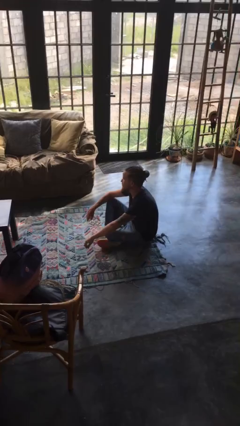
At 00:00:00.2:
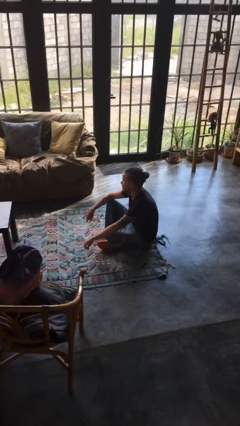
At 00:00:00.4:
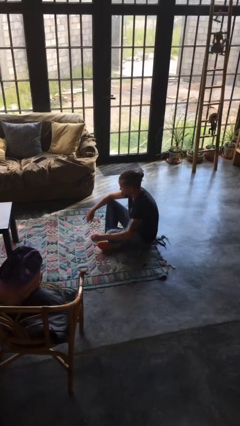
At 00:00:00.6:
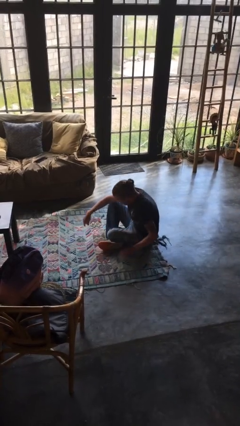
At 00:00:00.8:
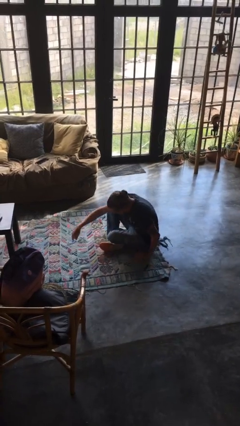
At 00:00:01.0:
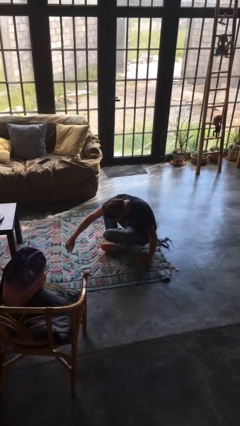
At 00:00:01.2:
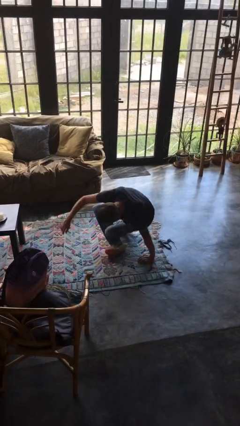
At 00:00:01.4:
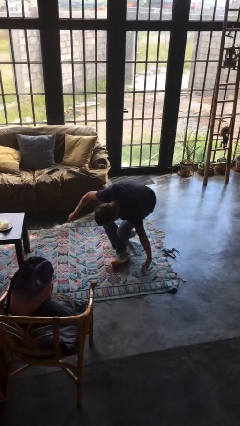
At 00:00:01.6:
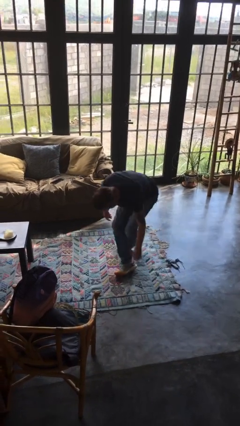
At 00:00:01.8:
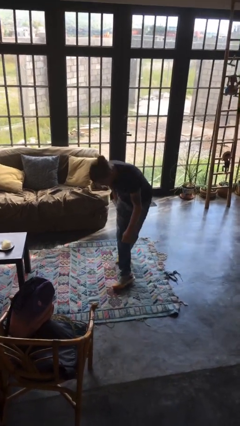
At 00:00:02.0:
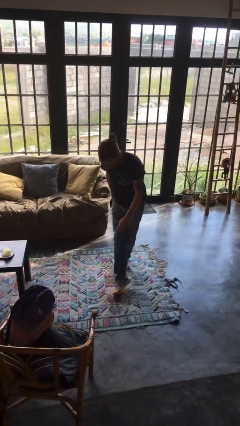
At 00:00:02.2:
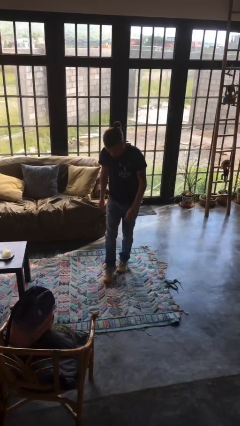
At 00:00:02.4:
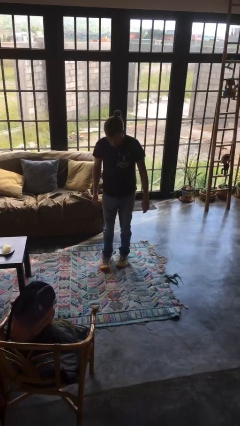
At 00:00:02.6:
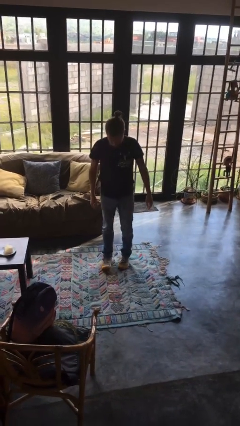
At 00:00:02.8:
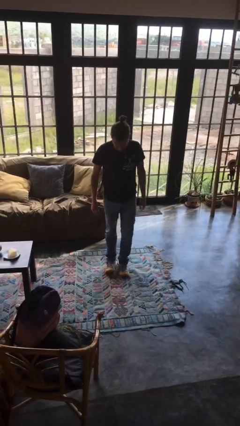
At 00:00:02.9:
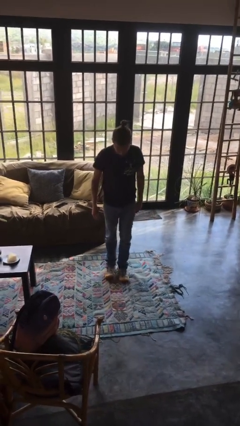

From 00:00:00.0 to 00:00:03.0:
person stands up from floor

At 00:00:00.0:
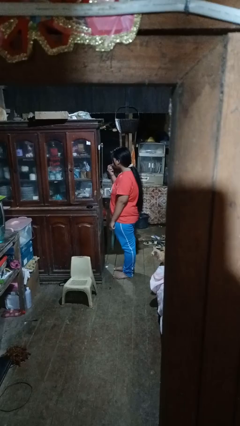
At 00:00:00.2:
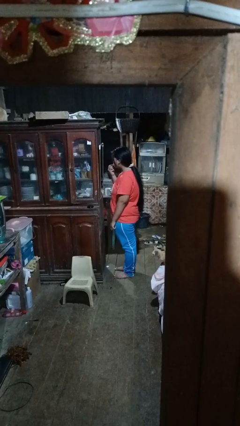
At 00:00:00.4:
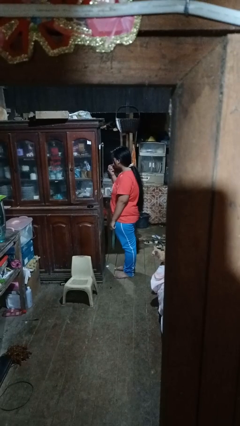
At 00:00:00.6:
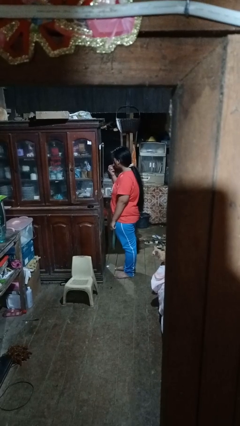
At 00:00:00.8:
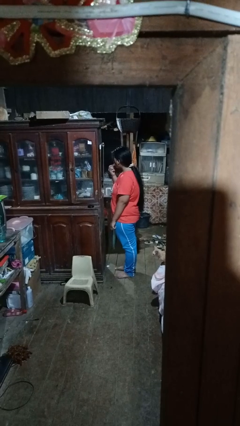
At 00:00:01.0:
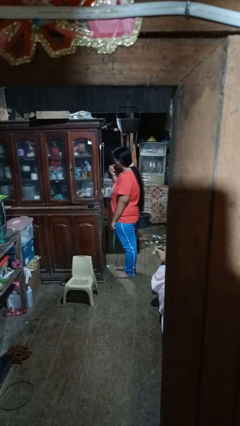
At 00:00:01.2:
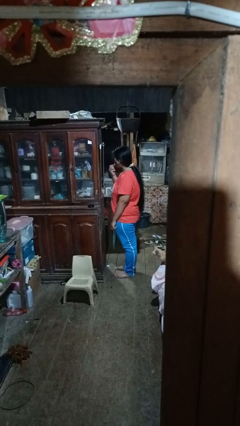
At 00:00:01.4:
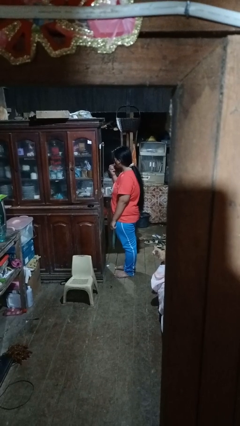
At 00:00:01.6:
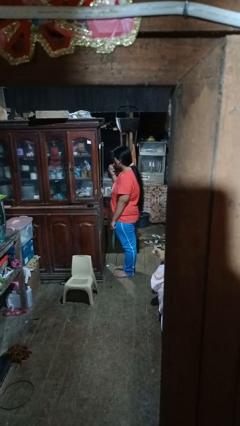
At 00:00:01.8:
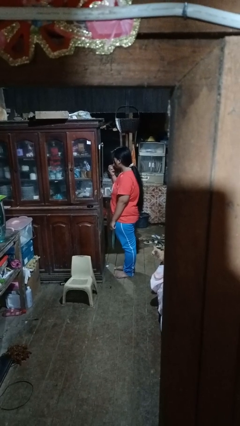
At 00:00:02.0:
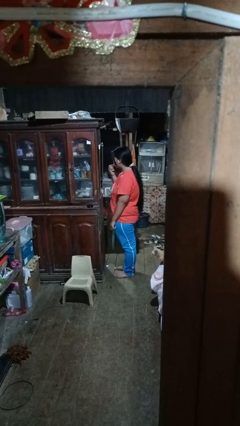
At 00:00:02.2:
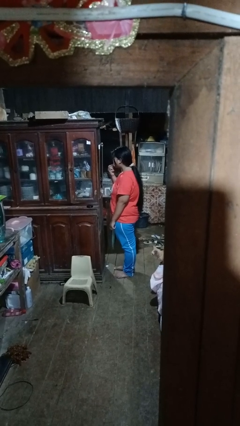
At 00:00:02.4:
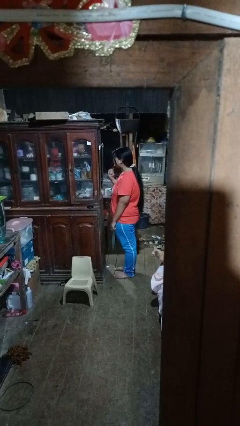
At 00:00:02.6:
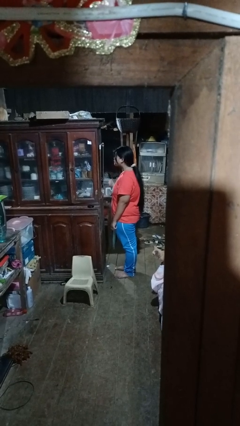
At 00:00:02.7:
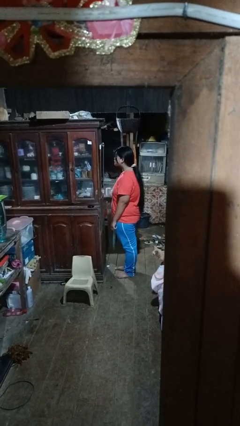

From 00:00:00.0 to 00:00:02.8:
person applies lip makeup

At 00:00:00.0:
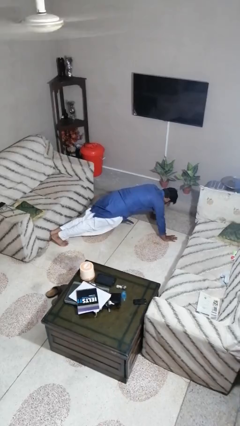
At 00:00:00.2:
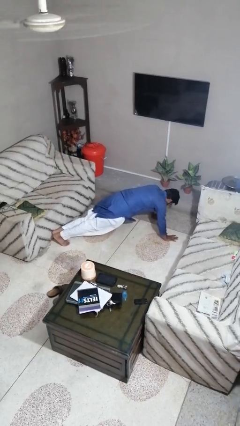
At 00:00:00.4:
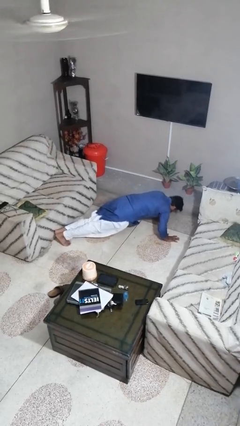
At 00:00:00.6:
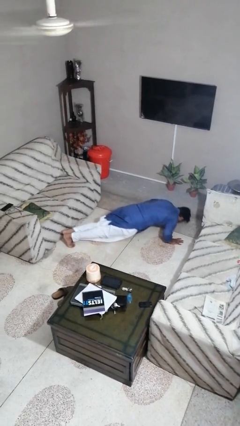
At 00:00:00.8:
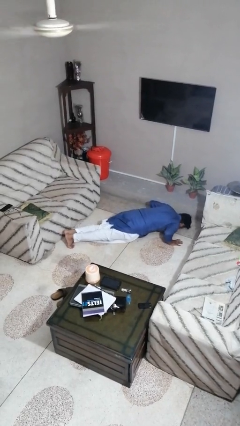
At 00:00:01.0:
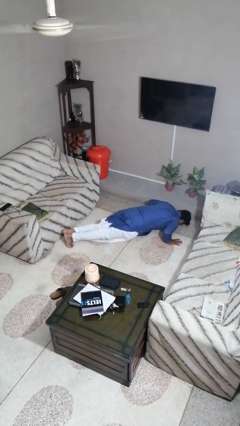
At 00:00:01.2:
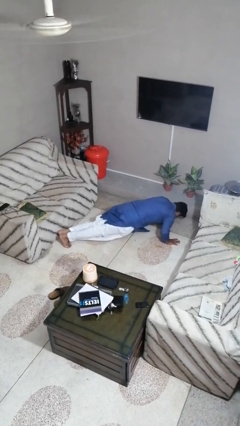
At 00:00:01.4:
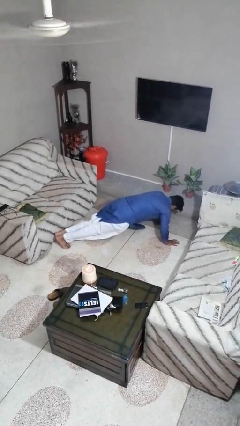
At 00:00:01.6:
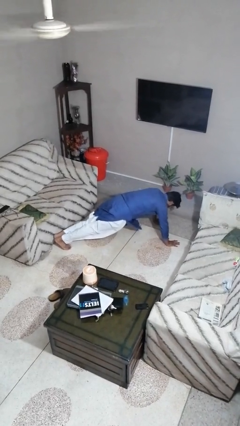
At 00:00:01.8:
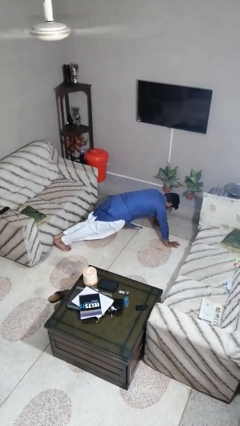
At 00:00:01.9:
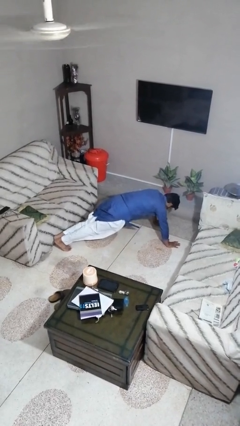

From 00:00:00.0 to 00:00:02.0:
person exercises with pushup

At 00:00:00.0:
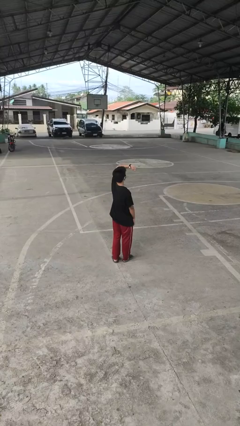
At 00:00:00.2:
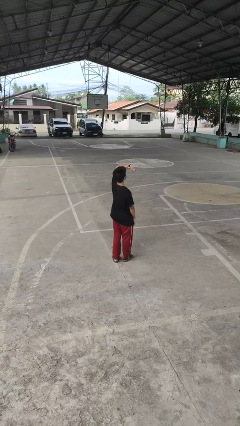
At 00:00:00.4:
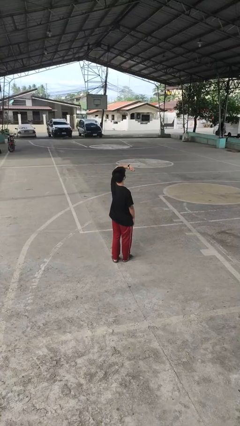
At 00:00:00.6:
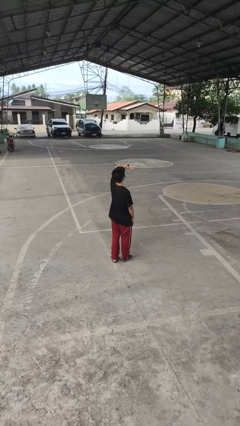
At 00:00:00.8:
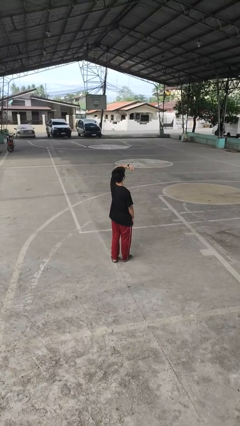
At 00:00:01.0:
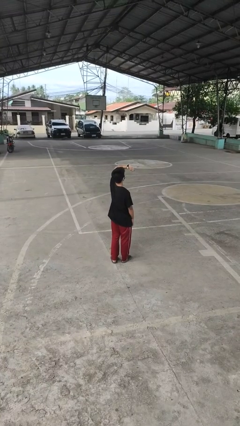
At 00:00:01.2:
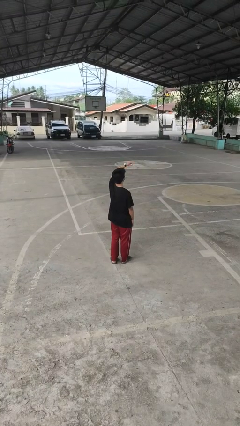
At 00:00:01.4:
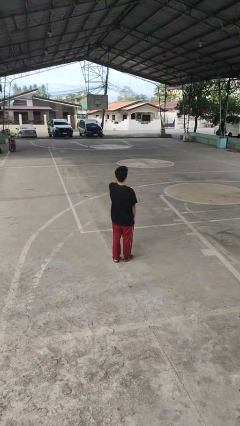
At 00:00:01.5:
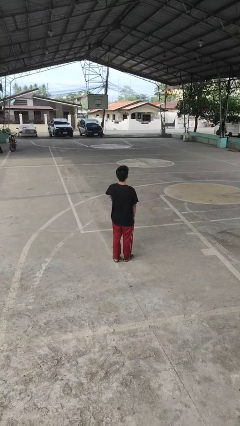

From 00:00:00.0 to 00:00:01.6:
person looks at wristwatch

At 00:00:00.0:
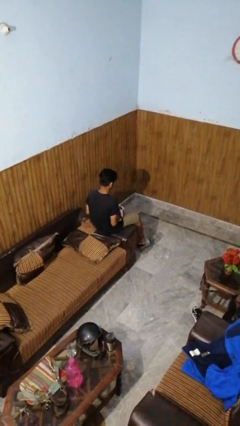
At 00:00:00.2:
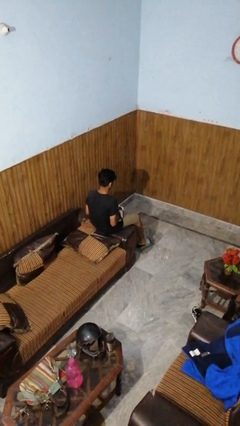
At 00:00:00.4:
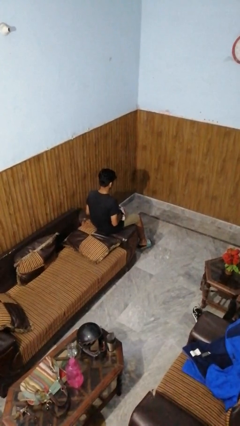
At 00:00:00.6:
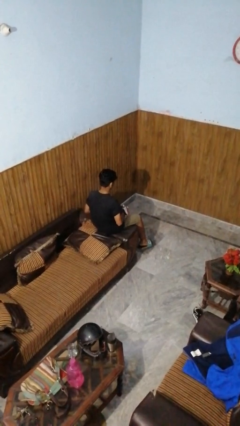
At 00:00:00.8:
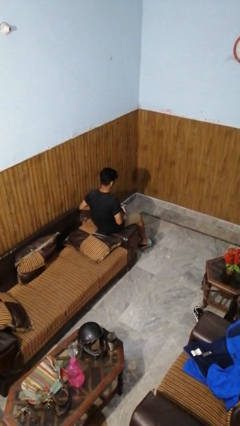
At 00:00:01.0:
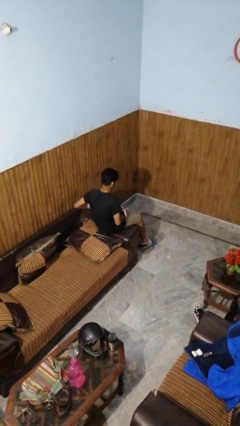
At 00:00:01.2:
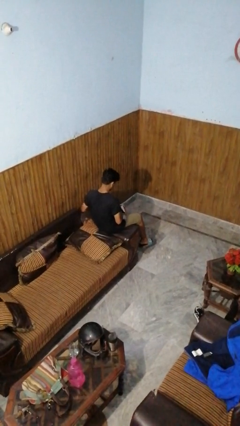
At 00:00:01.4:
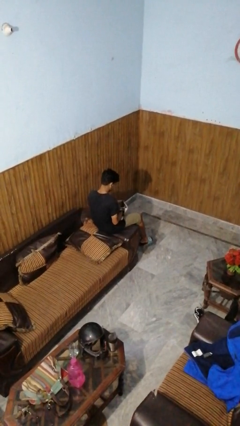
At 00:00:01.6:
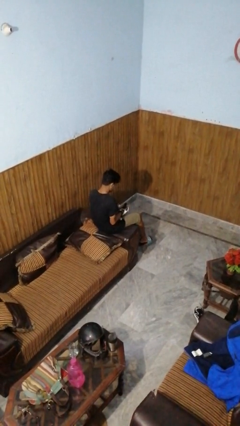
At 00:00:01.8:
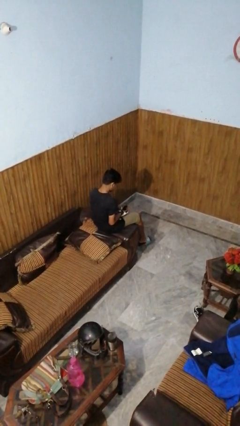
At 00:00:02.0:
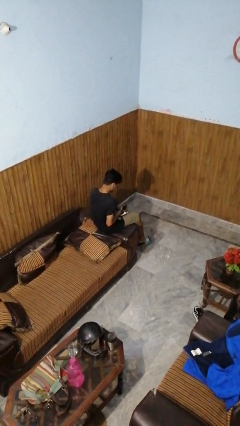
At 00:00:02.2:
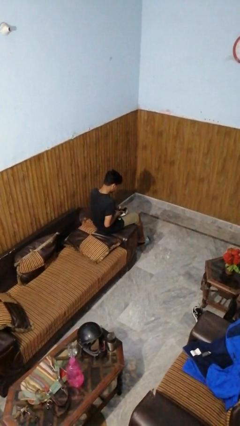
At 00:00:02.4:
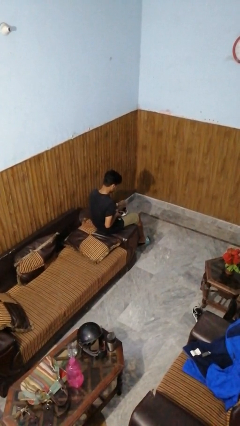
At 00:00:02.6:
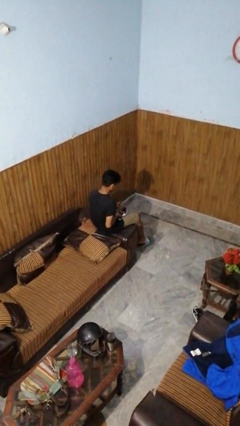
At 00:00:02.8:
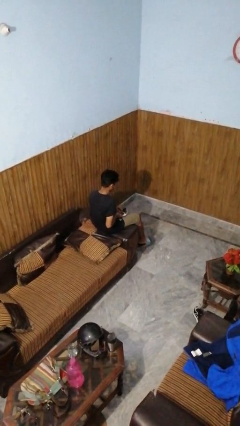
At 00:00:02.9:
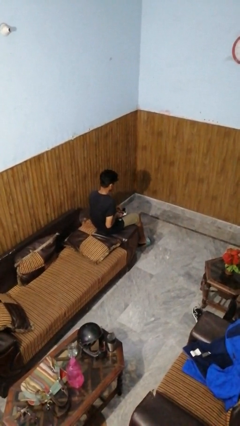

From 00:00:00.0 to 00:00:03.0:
person takes off gloves

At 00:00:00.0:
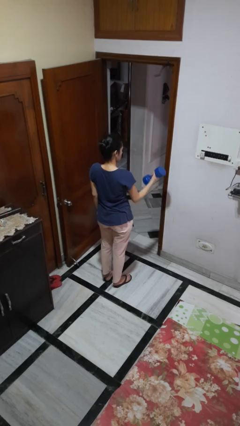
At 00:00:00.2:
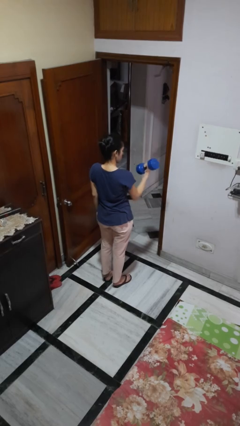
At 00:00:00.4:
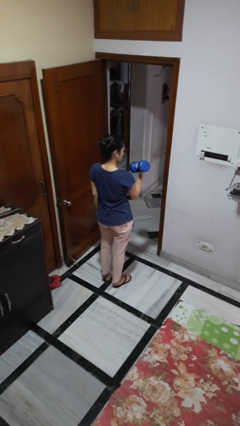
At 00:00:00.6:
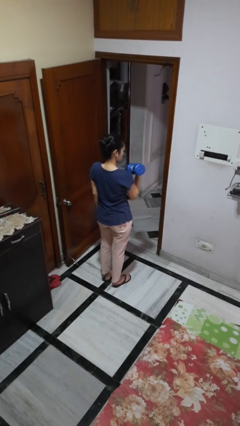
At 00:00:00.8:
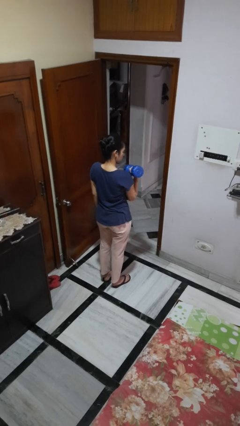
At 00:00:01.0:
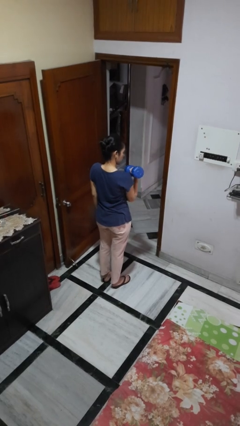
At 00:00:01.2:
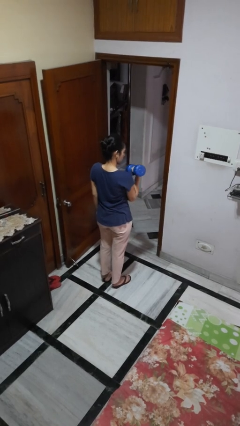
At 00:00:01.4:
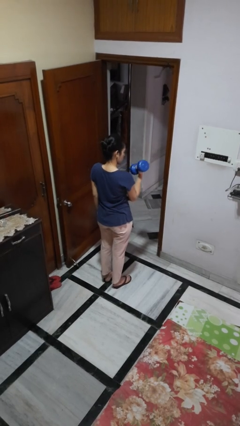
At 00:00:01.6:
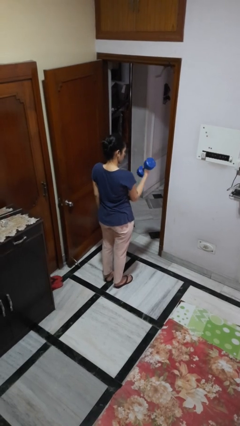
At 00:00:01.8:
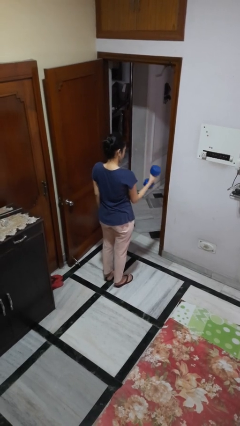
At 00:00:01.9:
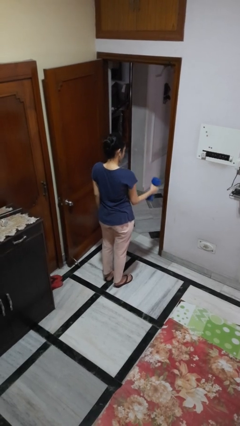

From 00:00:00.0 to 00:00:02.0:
person lifts dumbbells

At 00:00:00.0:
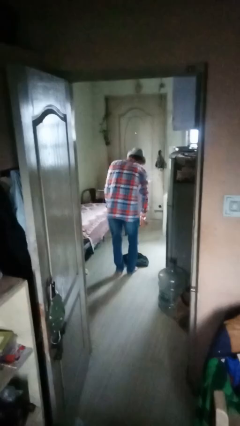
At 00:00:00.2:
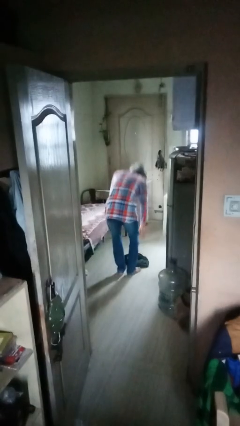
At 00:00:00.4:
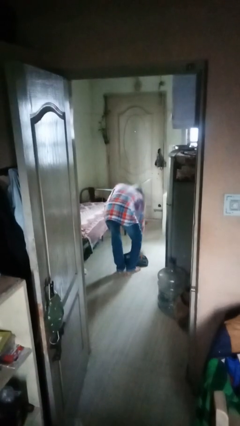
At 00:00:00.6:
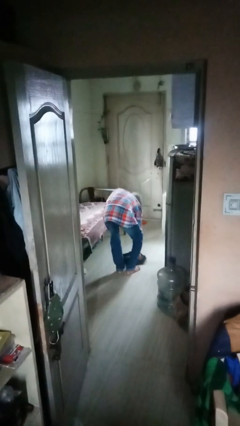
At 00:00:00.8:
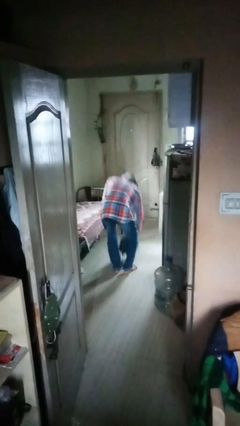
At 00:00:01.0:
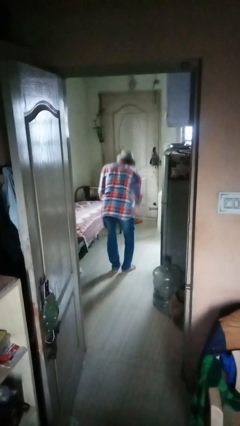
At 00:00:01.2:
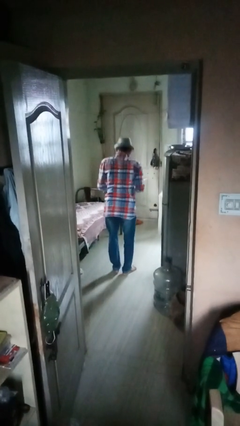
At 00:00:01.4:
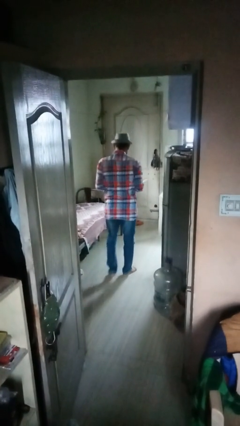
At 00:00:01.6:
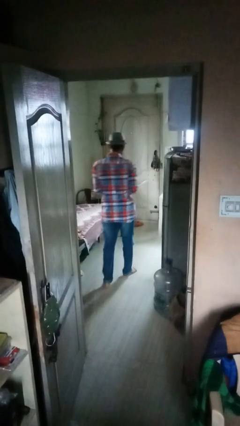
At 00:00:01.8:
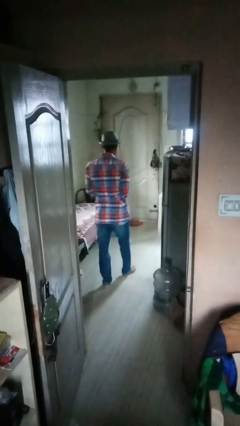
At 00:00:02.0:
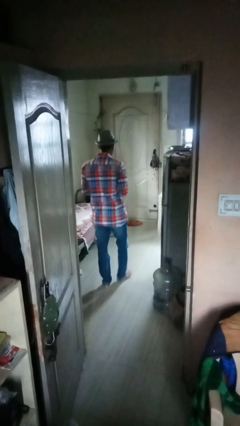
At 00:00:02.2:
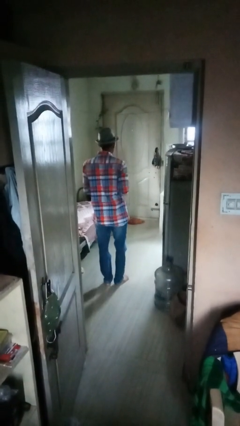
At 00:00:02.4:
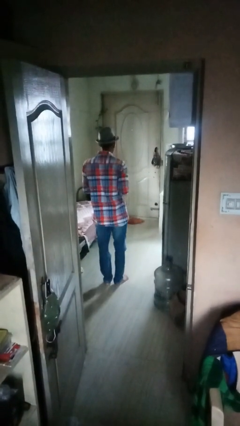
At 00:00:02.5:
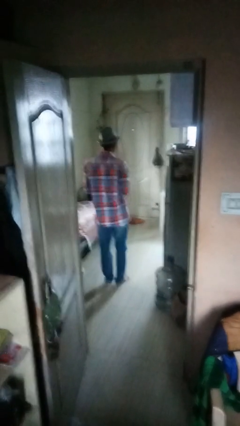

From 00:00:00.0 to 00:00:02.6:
person picks up object from floor
